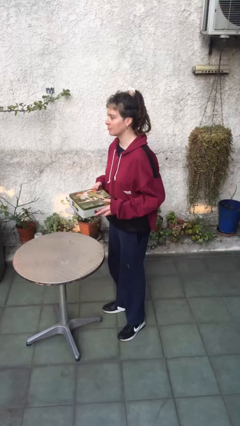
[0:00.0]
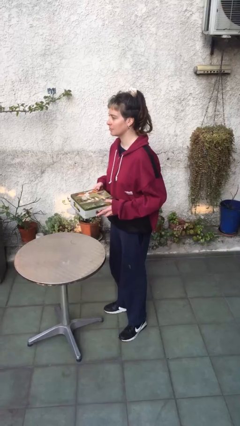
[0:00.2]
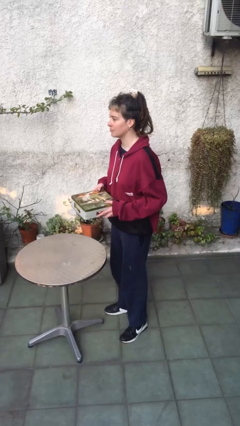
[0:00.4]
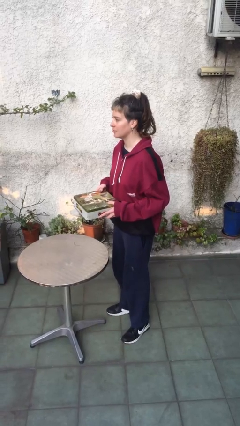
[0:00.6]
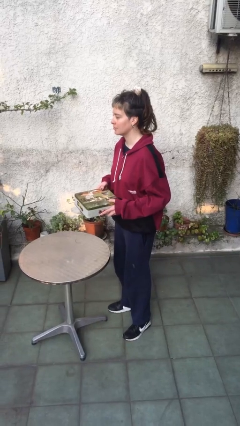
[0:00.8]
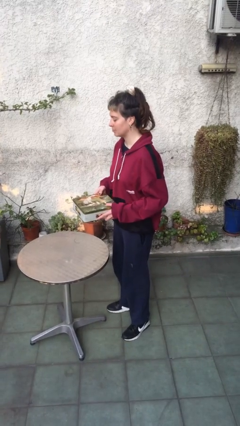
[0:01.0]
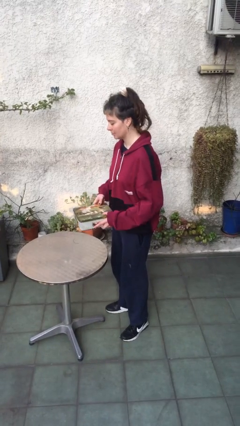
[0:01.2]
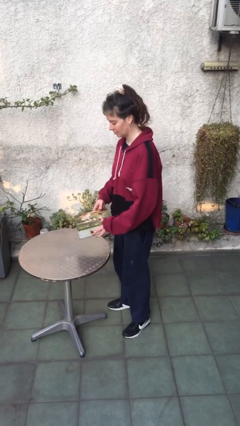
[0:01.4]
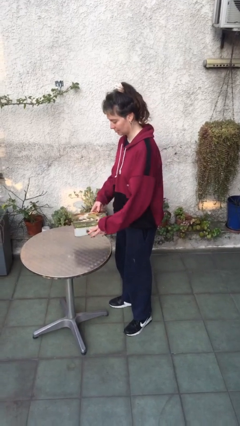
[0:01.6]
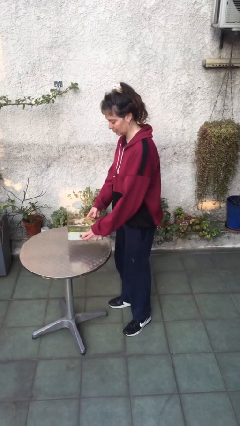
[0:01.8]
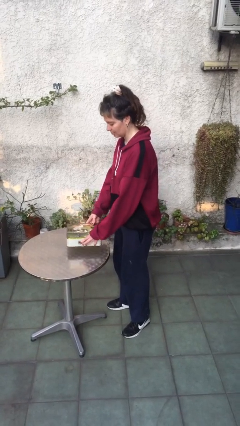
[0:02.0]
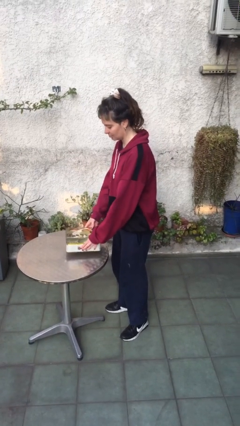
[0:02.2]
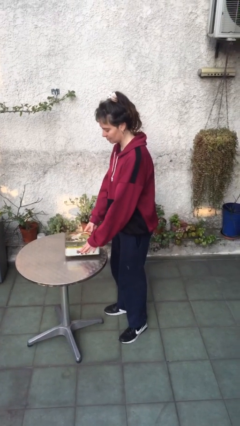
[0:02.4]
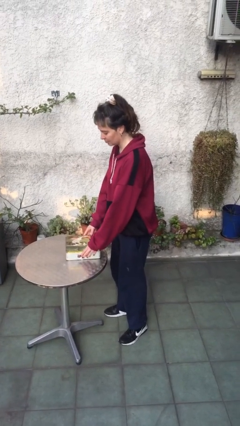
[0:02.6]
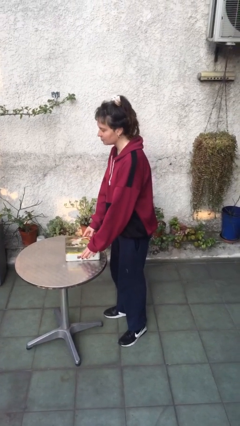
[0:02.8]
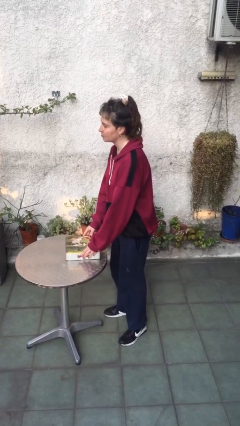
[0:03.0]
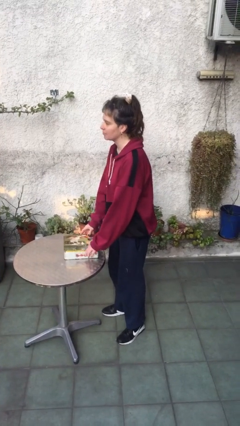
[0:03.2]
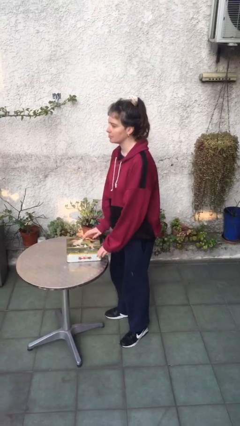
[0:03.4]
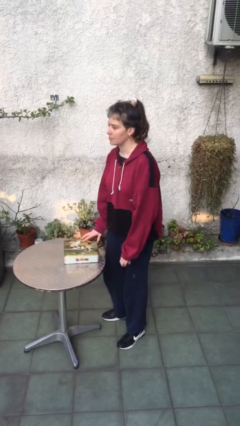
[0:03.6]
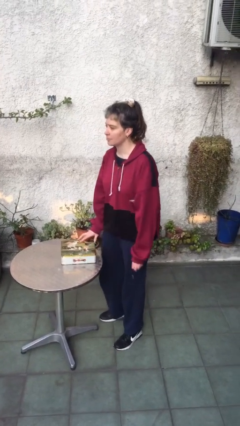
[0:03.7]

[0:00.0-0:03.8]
person puts down object on table

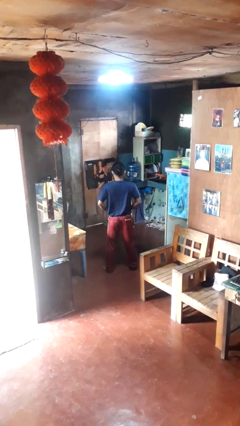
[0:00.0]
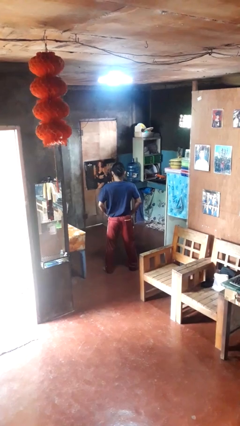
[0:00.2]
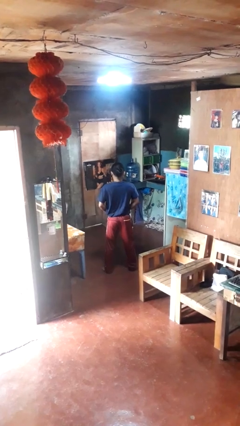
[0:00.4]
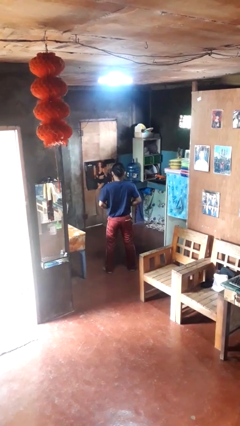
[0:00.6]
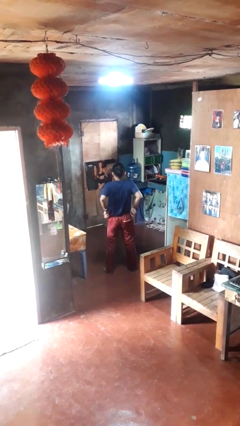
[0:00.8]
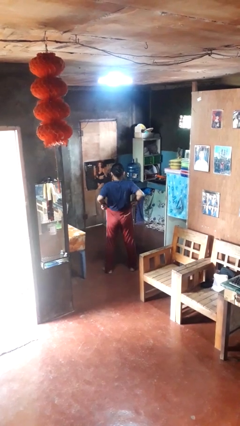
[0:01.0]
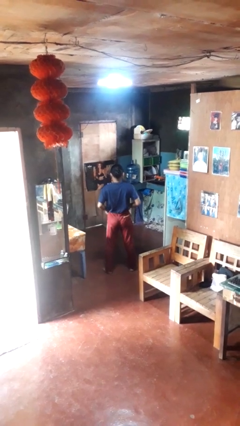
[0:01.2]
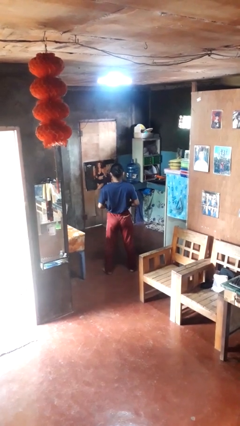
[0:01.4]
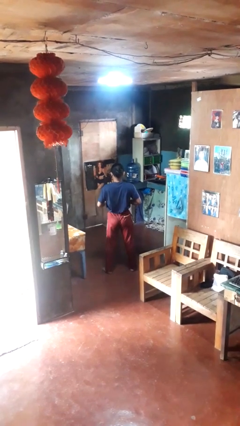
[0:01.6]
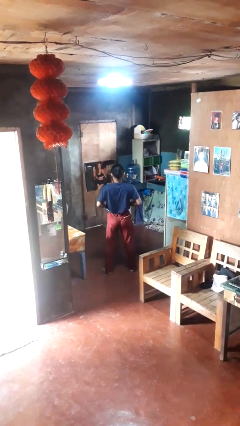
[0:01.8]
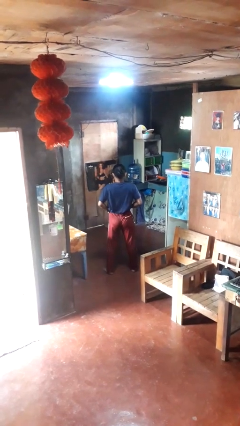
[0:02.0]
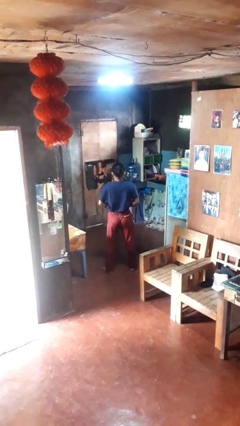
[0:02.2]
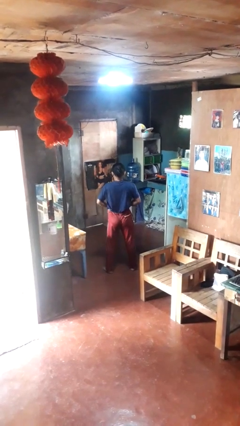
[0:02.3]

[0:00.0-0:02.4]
person hikes up pants

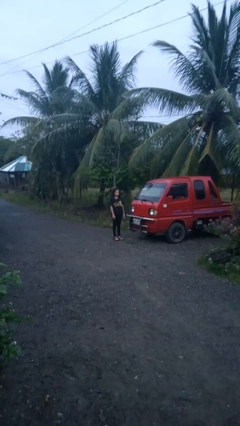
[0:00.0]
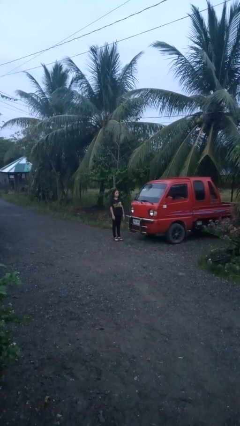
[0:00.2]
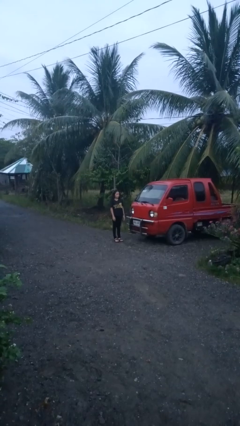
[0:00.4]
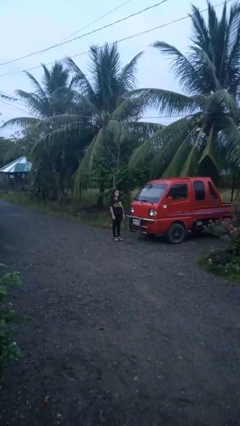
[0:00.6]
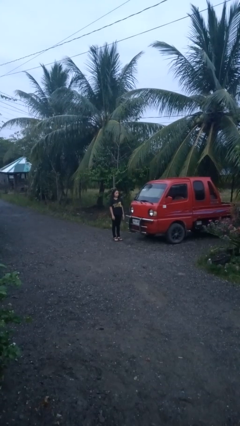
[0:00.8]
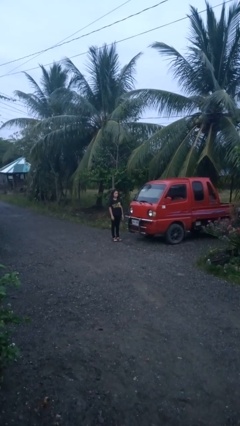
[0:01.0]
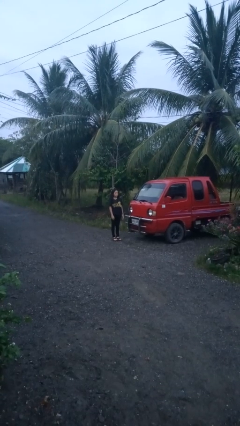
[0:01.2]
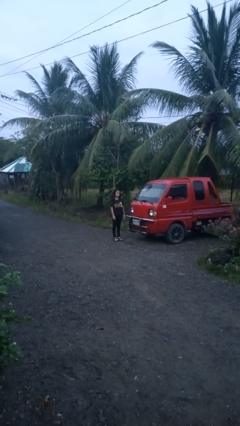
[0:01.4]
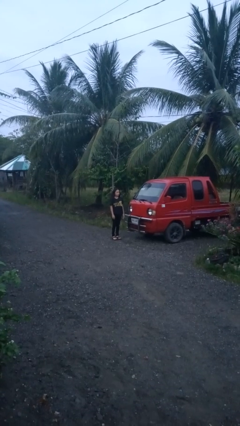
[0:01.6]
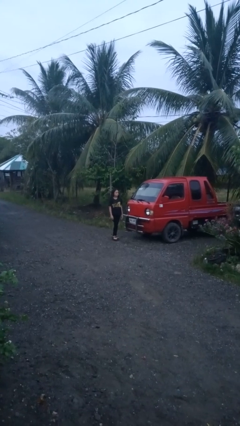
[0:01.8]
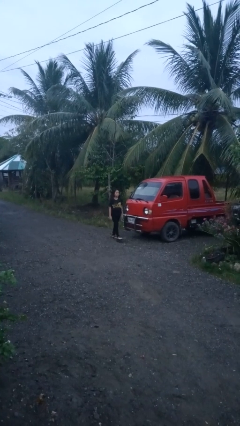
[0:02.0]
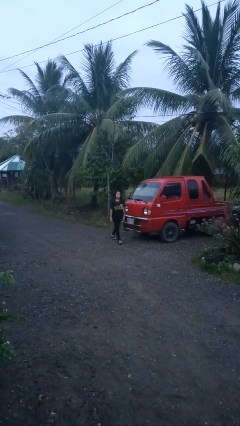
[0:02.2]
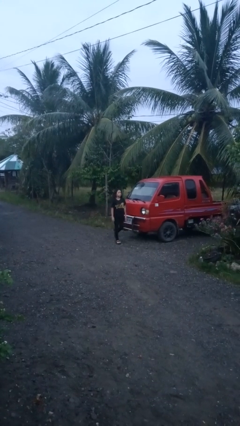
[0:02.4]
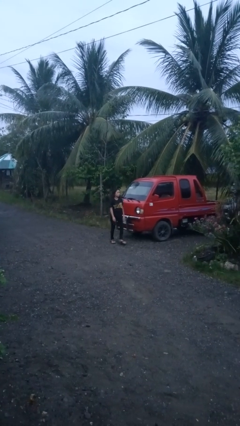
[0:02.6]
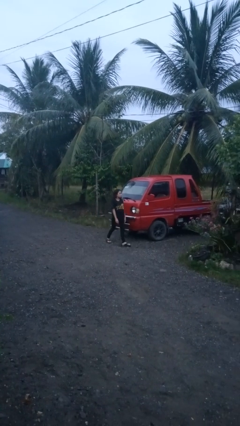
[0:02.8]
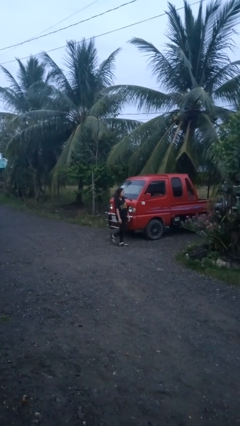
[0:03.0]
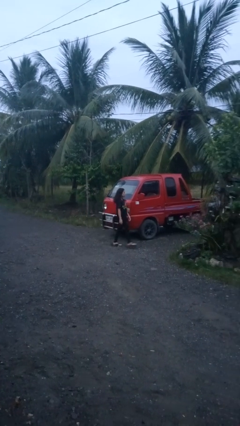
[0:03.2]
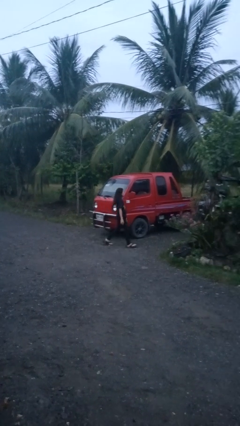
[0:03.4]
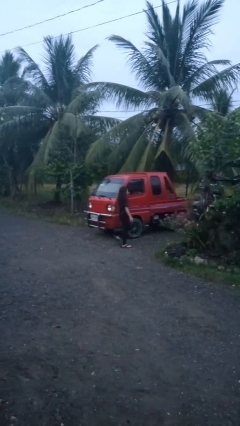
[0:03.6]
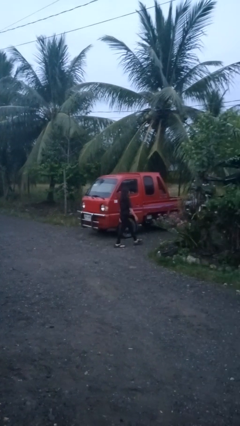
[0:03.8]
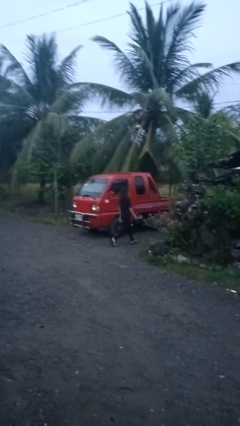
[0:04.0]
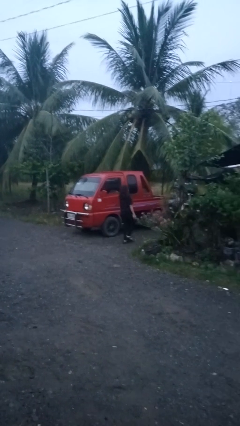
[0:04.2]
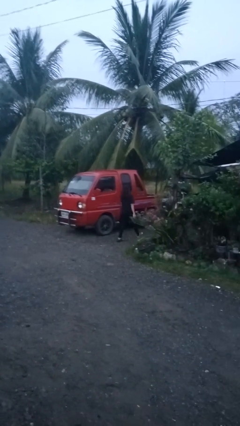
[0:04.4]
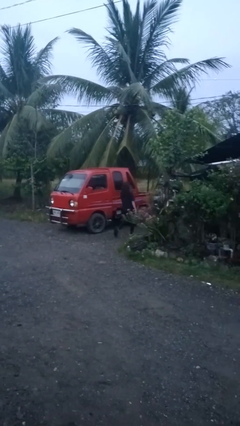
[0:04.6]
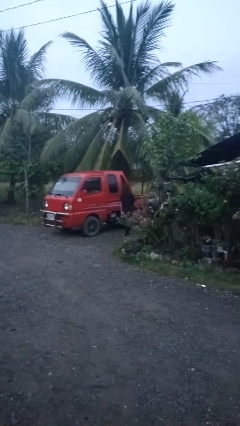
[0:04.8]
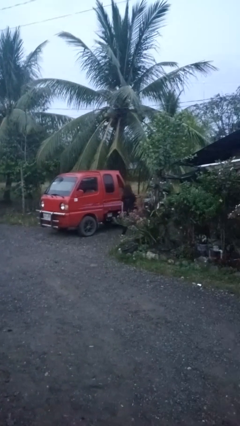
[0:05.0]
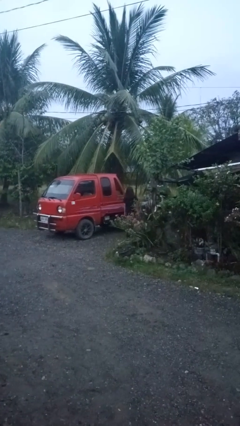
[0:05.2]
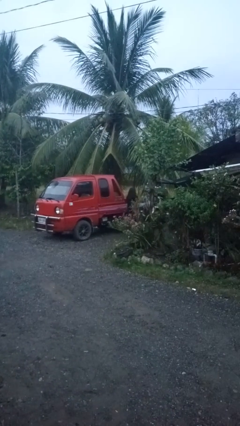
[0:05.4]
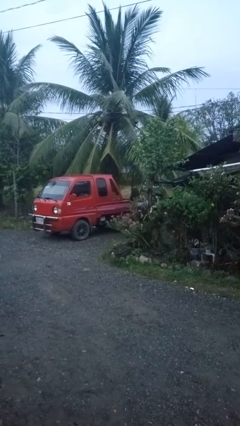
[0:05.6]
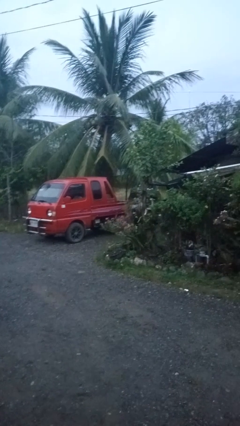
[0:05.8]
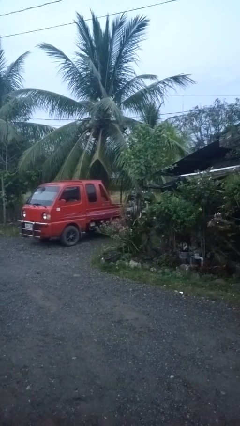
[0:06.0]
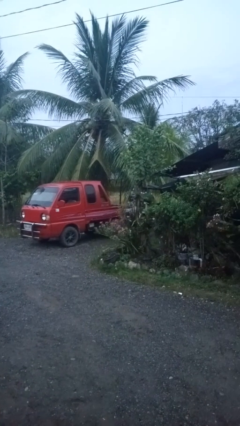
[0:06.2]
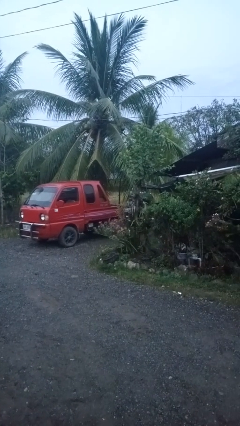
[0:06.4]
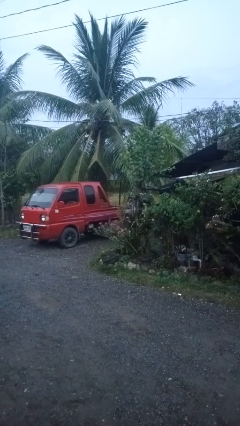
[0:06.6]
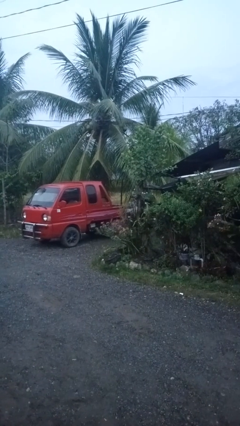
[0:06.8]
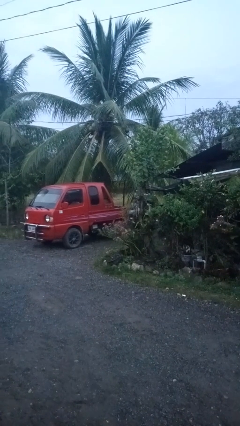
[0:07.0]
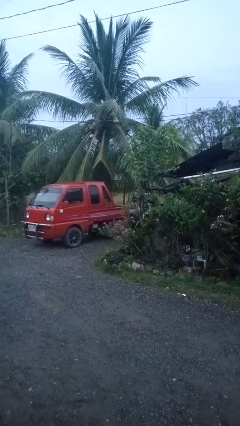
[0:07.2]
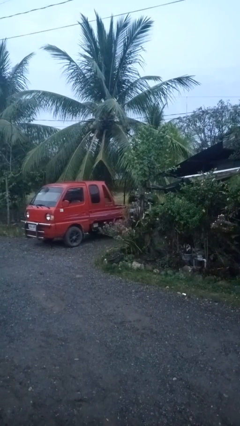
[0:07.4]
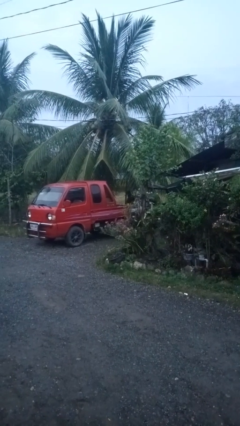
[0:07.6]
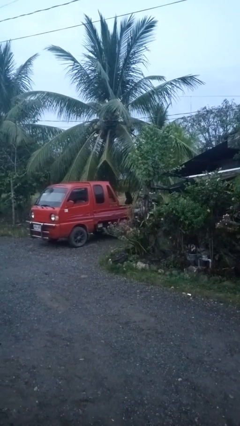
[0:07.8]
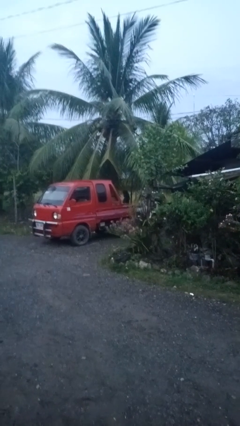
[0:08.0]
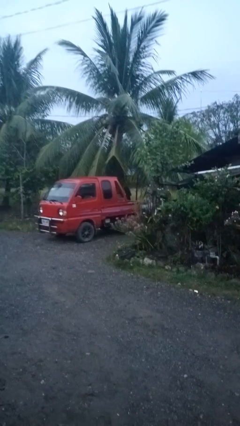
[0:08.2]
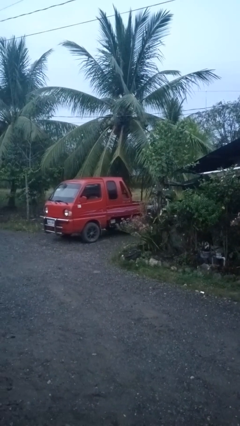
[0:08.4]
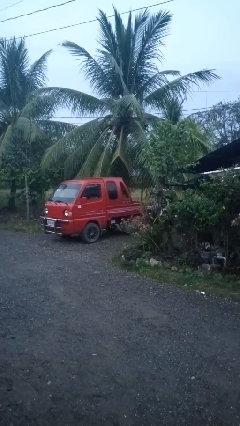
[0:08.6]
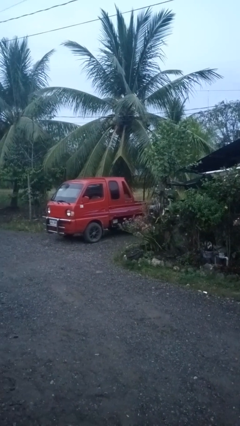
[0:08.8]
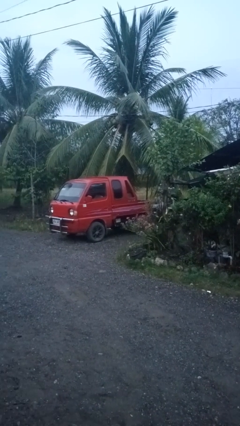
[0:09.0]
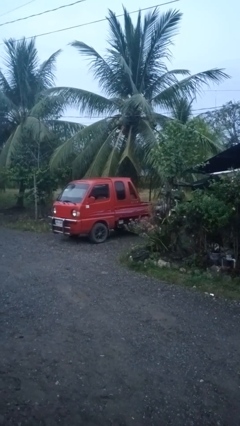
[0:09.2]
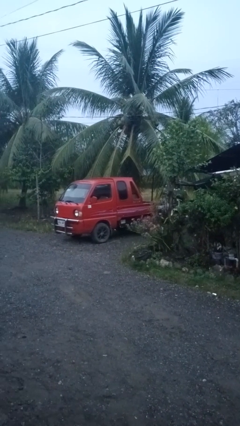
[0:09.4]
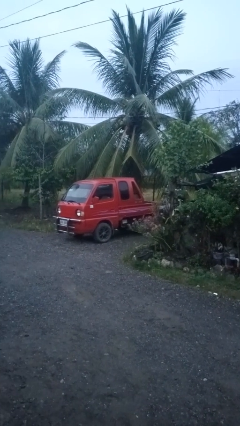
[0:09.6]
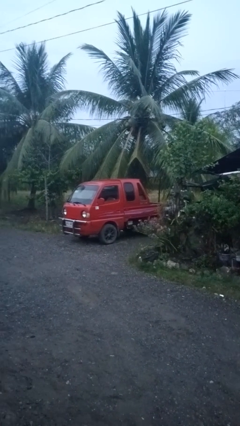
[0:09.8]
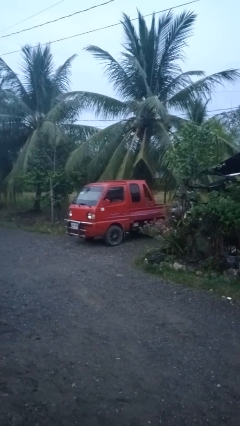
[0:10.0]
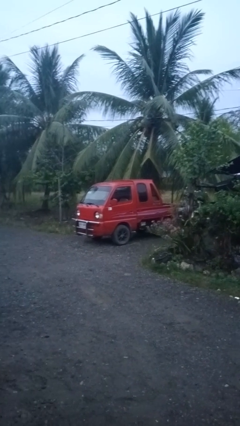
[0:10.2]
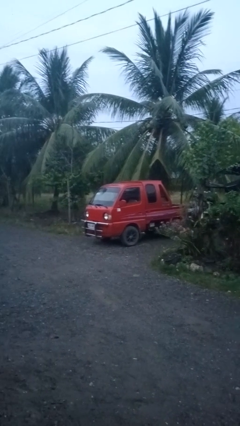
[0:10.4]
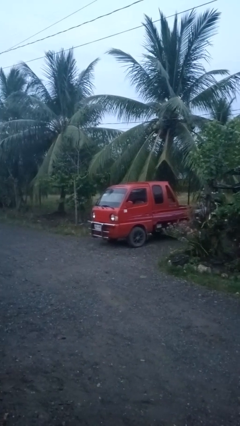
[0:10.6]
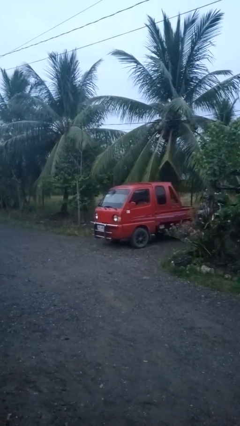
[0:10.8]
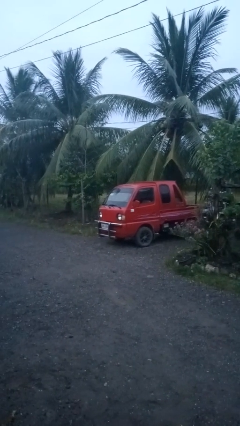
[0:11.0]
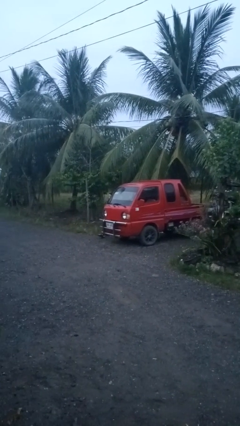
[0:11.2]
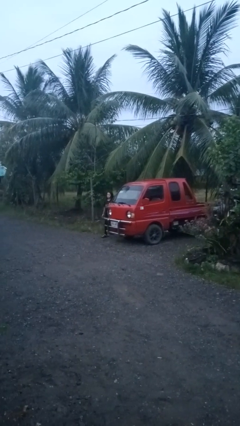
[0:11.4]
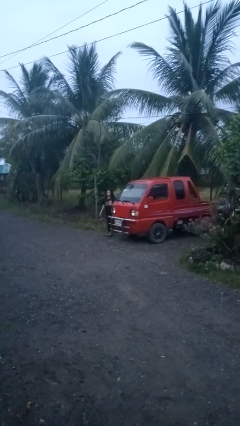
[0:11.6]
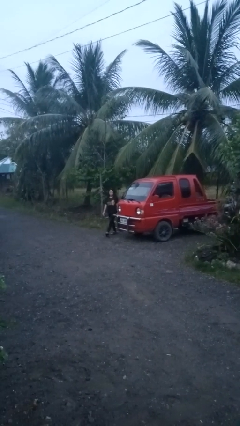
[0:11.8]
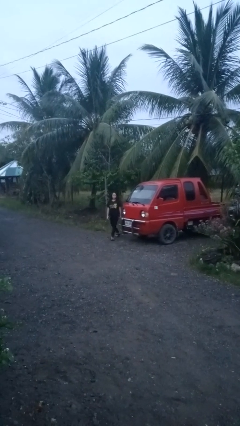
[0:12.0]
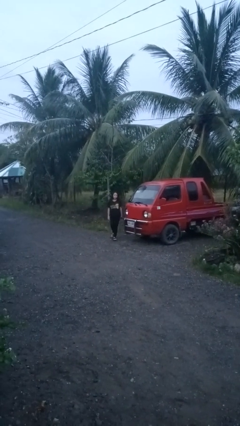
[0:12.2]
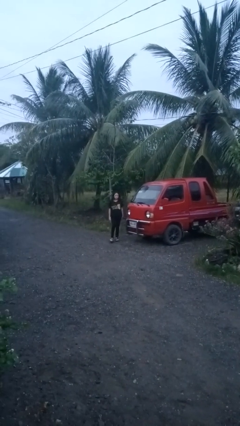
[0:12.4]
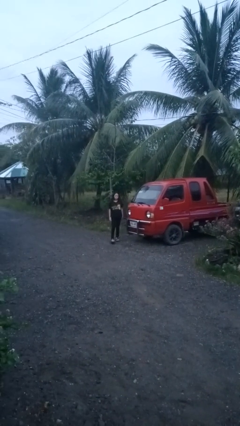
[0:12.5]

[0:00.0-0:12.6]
person walks around car
